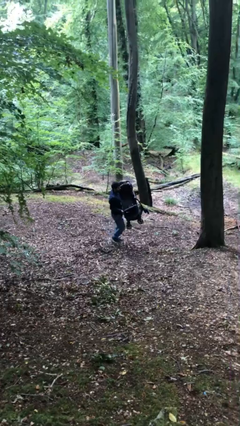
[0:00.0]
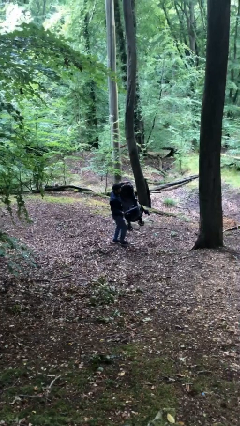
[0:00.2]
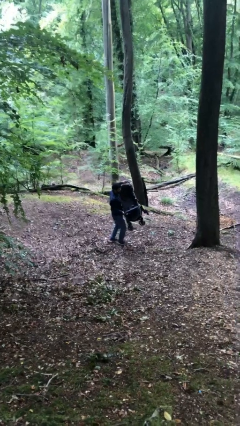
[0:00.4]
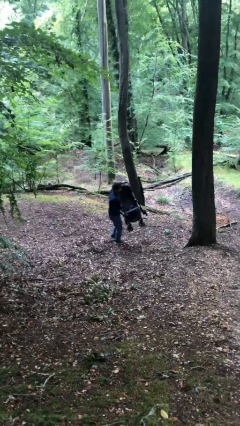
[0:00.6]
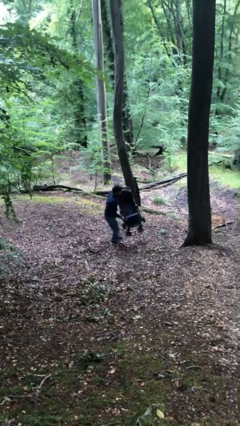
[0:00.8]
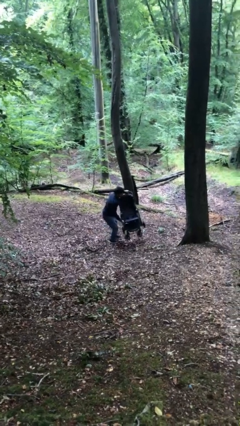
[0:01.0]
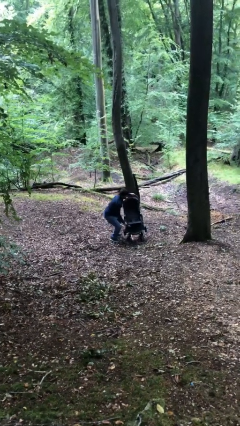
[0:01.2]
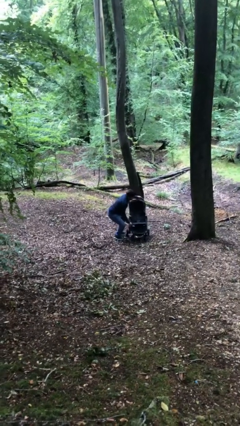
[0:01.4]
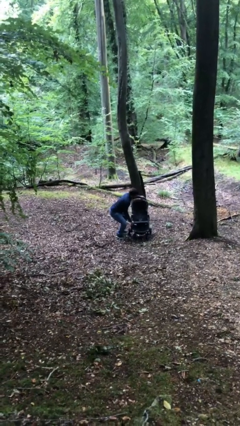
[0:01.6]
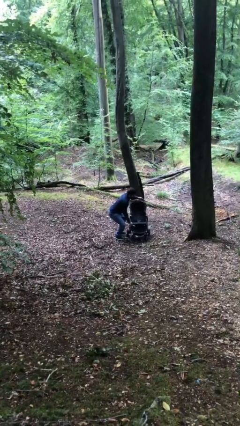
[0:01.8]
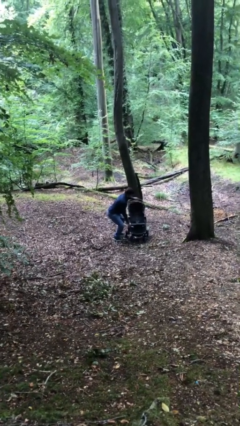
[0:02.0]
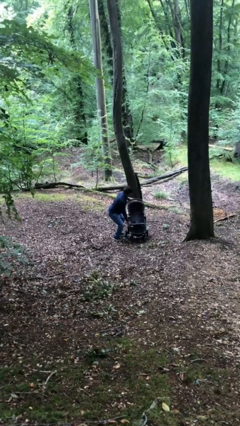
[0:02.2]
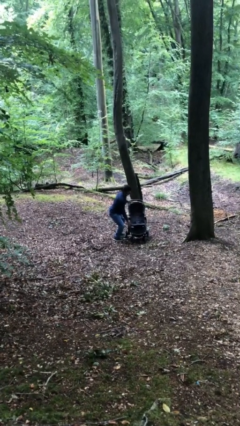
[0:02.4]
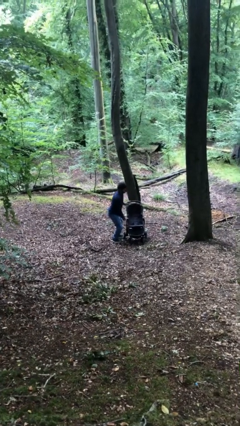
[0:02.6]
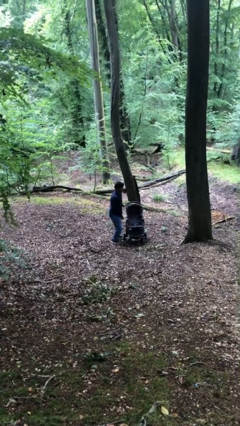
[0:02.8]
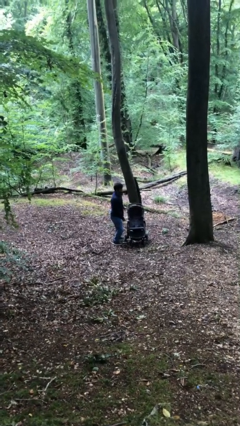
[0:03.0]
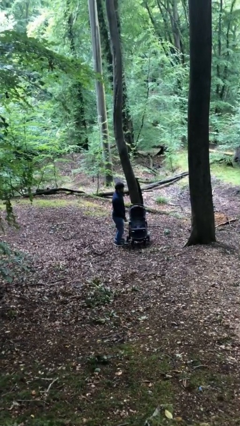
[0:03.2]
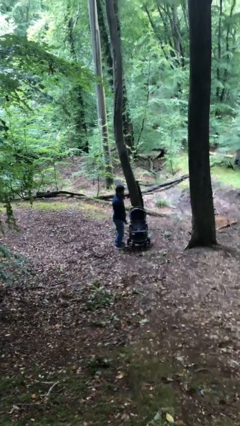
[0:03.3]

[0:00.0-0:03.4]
person puts down object on floor

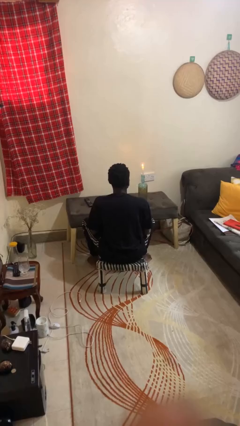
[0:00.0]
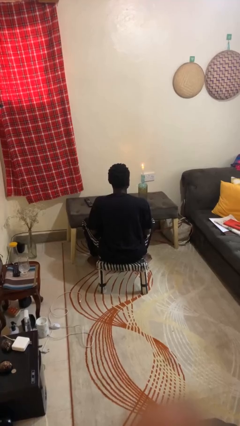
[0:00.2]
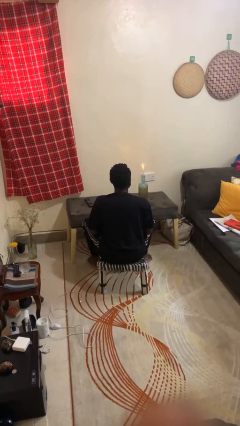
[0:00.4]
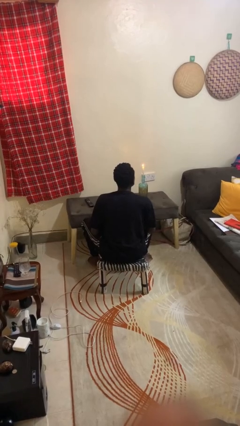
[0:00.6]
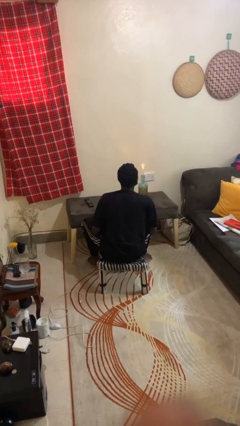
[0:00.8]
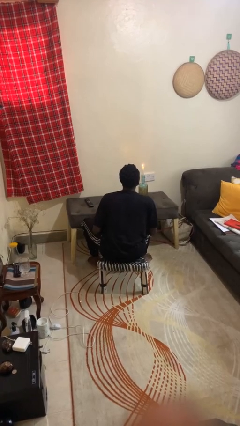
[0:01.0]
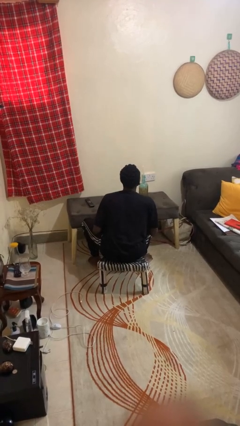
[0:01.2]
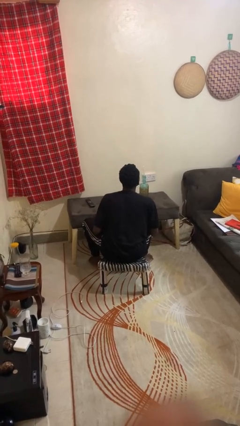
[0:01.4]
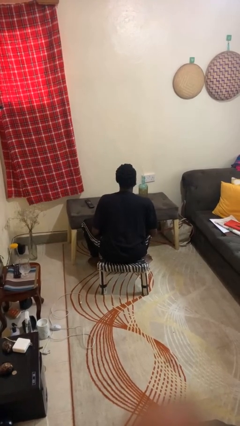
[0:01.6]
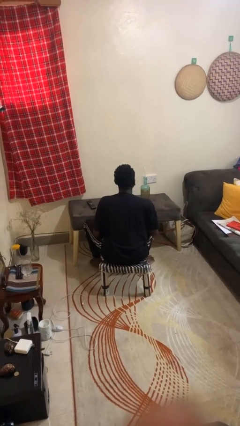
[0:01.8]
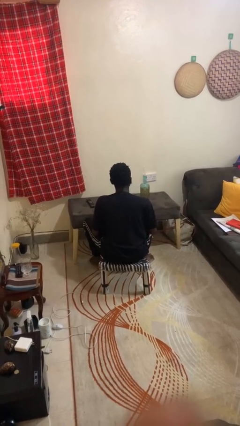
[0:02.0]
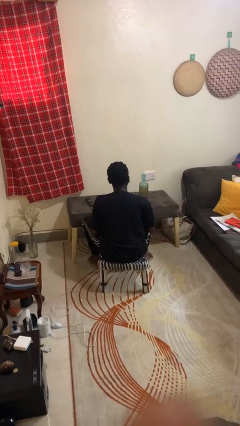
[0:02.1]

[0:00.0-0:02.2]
person extinguishes candle

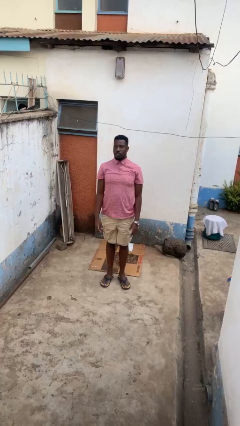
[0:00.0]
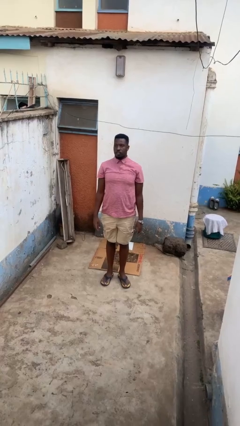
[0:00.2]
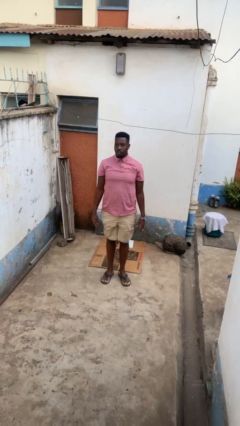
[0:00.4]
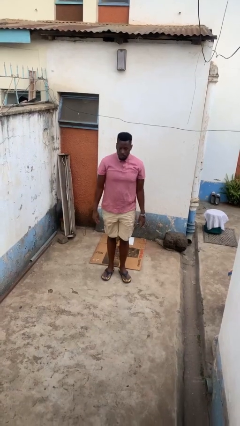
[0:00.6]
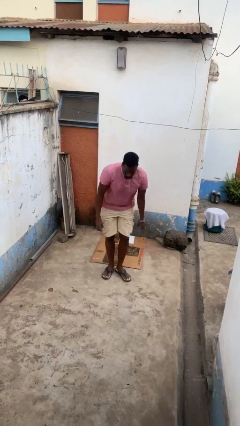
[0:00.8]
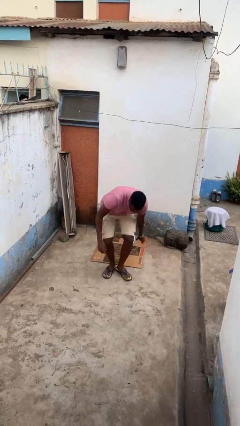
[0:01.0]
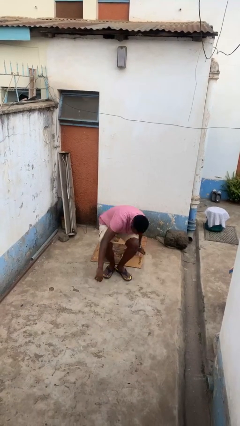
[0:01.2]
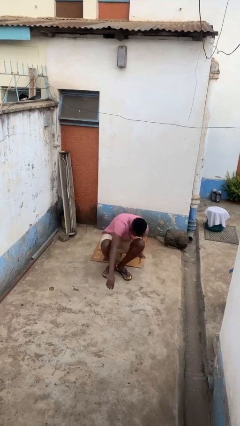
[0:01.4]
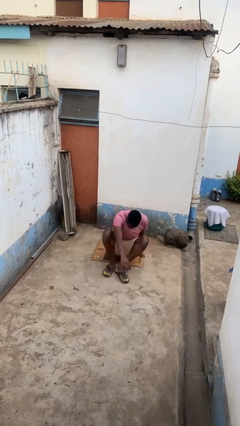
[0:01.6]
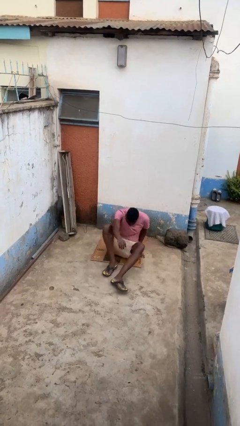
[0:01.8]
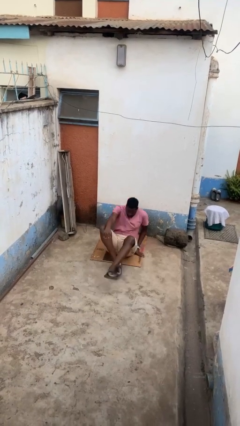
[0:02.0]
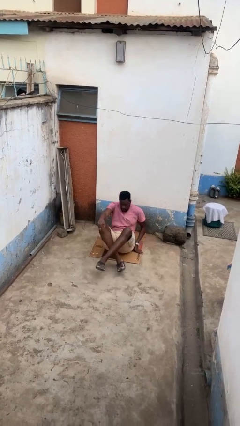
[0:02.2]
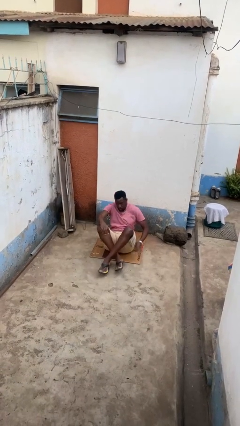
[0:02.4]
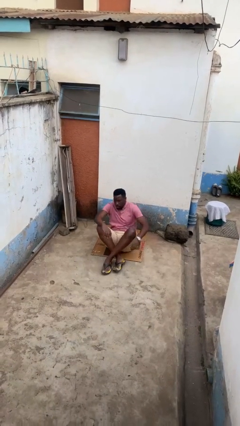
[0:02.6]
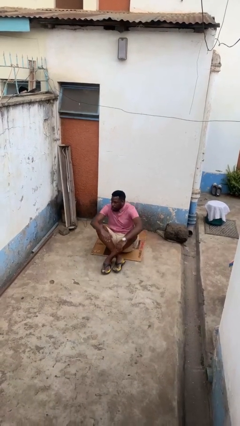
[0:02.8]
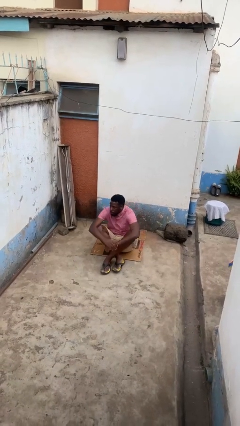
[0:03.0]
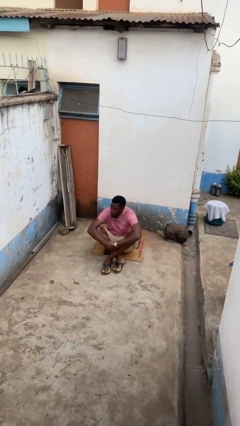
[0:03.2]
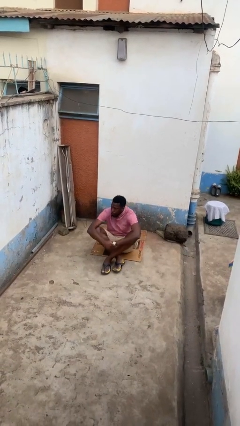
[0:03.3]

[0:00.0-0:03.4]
person sits crisscross

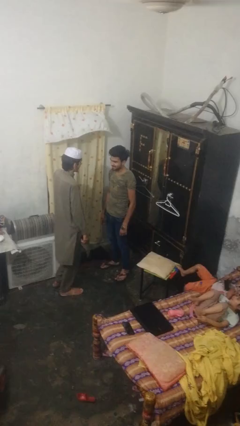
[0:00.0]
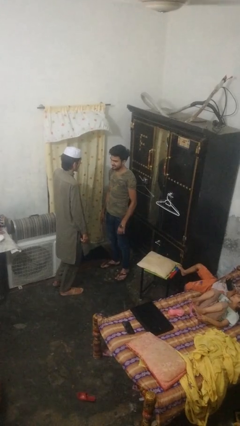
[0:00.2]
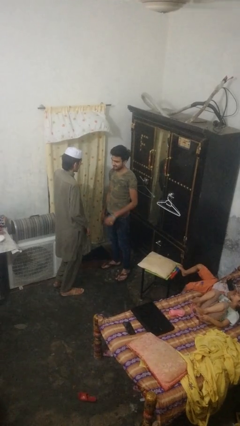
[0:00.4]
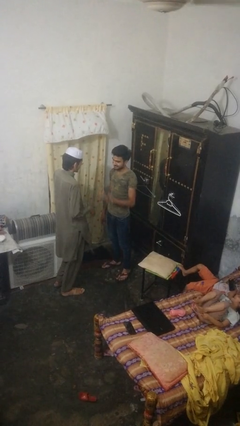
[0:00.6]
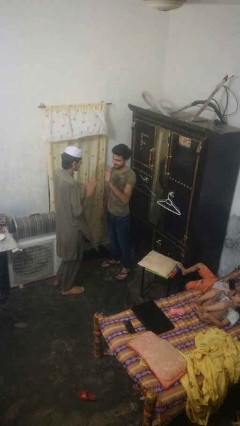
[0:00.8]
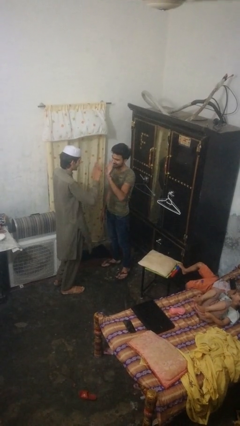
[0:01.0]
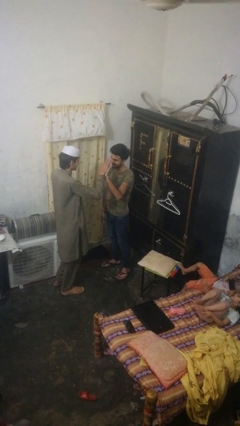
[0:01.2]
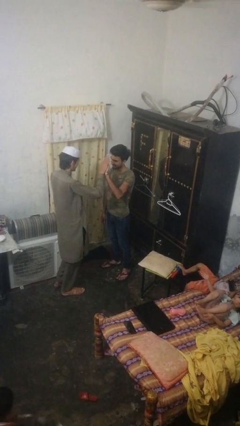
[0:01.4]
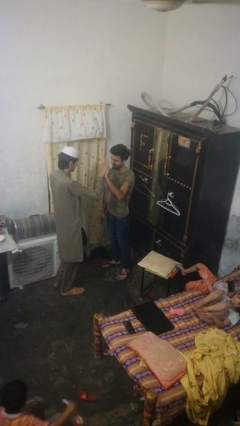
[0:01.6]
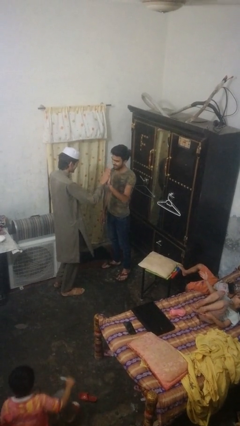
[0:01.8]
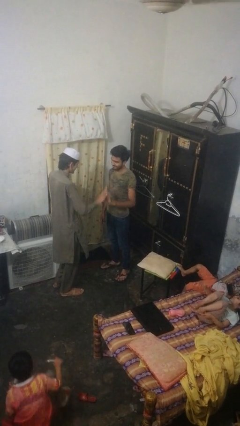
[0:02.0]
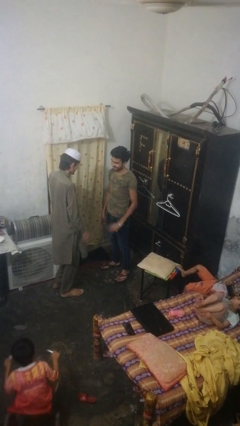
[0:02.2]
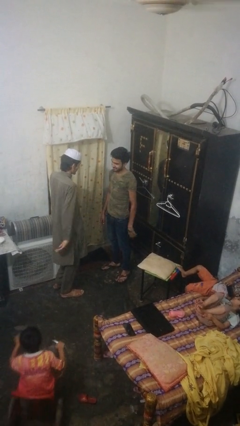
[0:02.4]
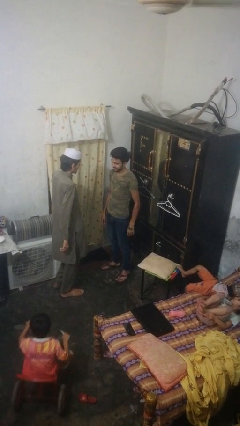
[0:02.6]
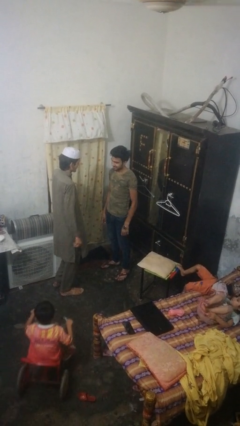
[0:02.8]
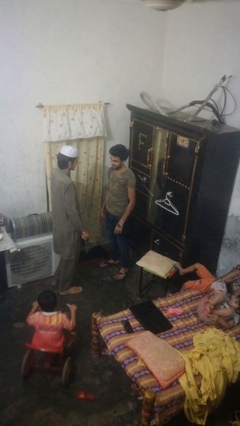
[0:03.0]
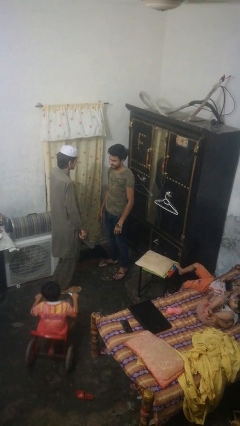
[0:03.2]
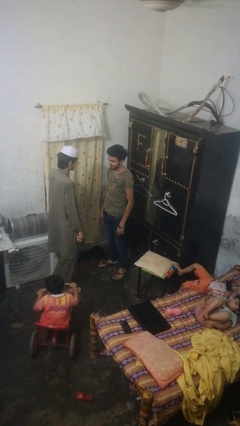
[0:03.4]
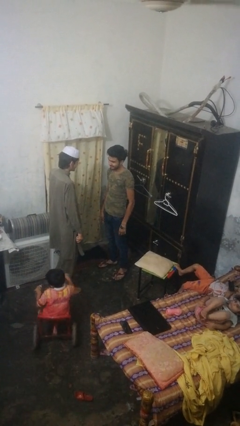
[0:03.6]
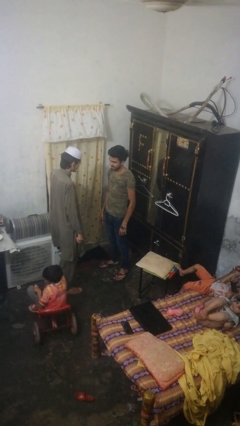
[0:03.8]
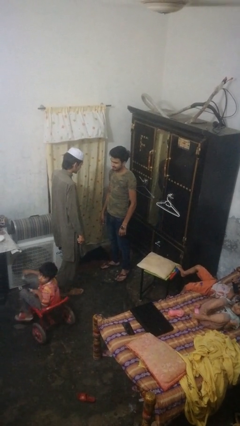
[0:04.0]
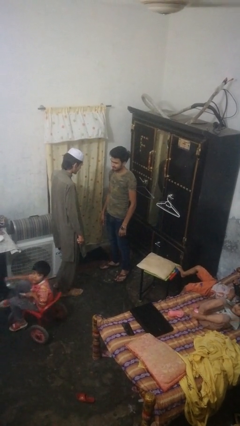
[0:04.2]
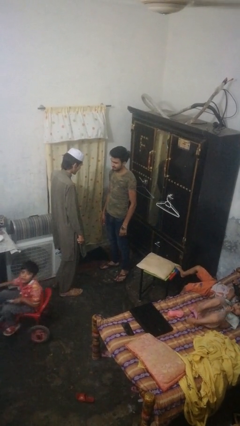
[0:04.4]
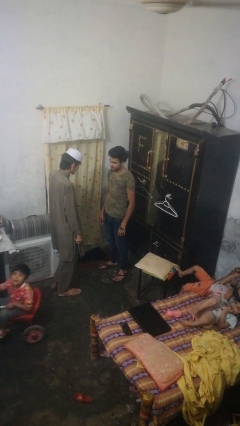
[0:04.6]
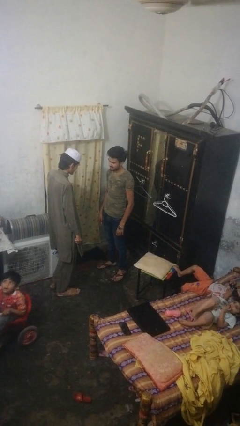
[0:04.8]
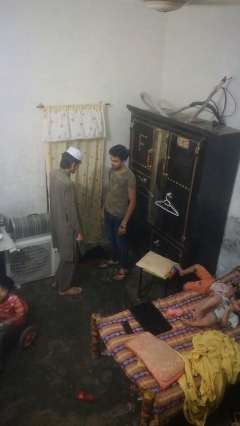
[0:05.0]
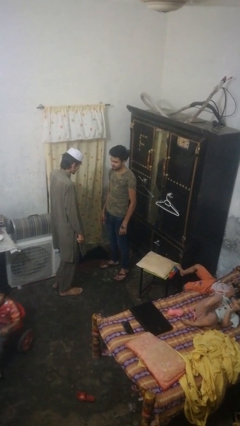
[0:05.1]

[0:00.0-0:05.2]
person highfives hand

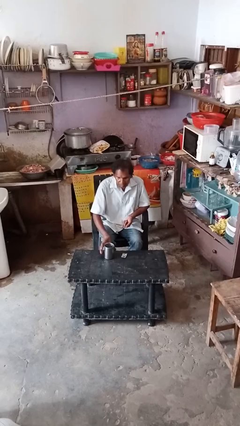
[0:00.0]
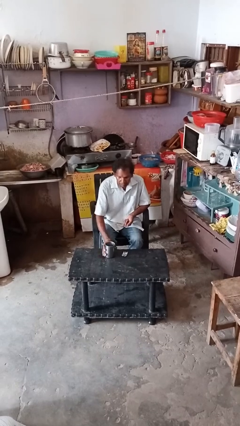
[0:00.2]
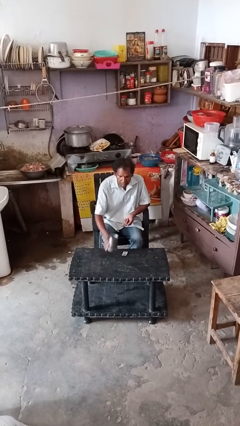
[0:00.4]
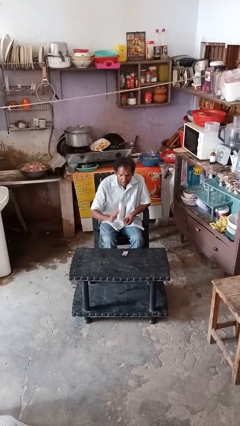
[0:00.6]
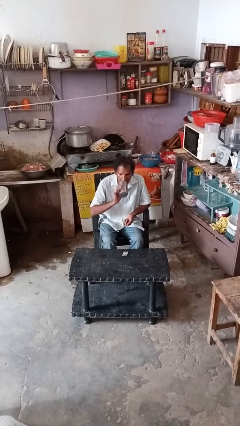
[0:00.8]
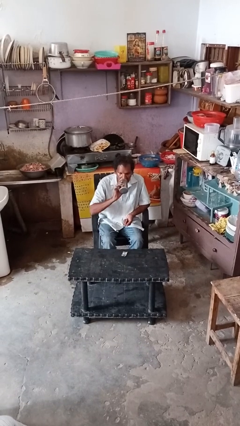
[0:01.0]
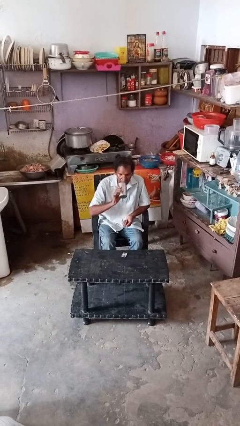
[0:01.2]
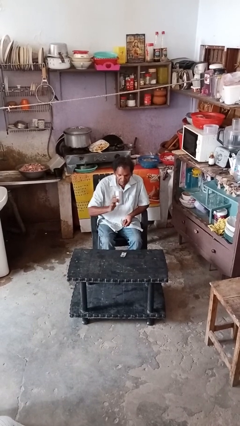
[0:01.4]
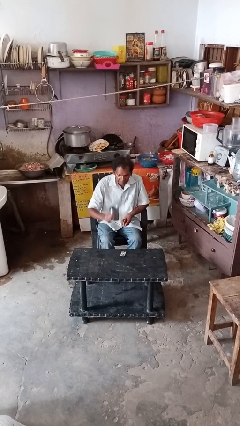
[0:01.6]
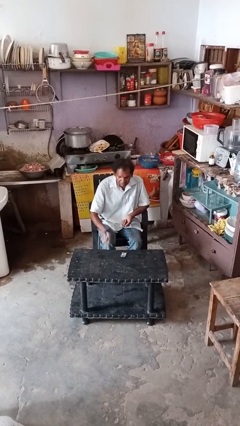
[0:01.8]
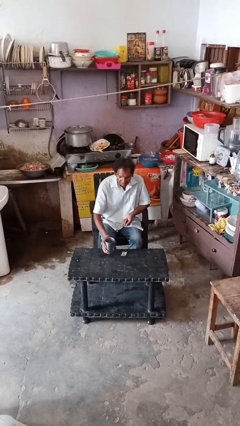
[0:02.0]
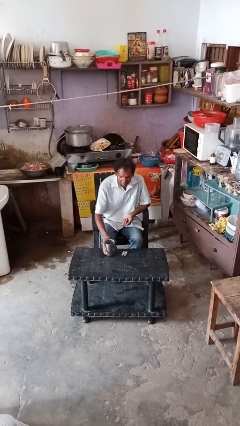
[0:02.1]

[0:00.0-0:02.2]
person drinks from cup

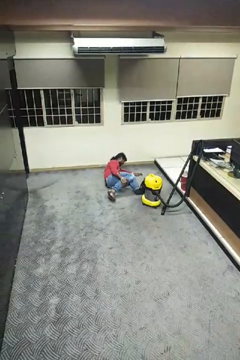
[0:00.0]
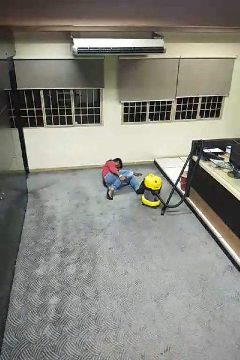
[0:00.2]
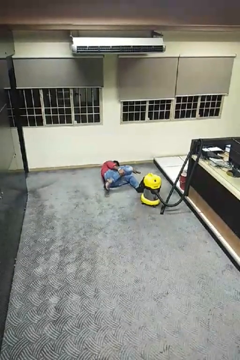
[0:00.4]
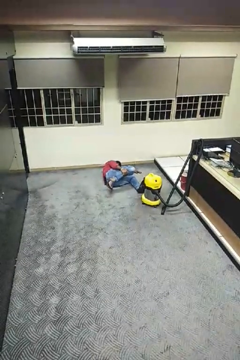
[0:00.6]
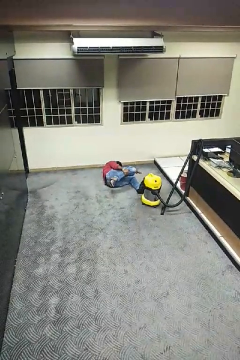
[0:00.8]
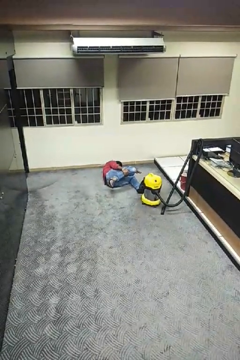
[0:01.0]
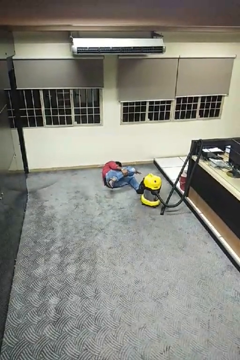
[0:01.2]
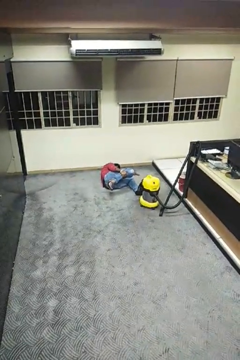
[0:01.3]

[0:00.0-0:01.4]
person lies down on floor
